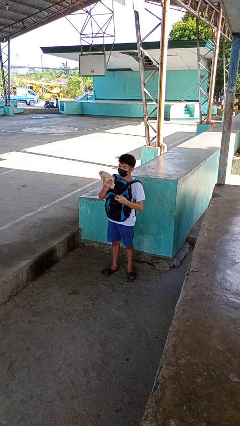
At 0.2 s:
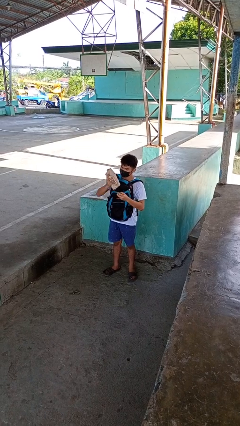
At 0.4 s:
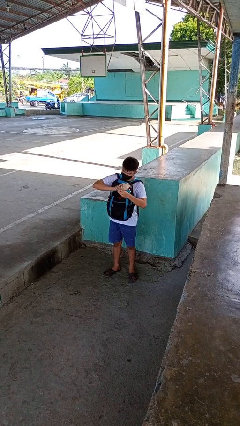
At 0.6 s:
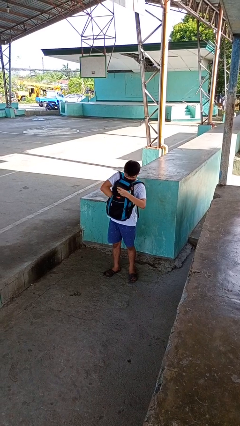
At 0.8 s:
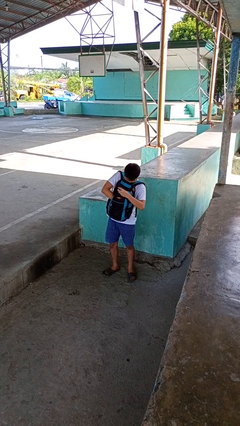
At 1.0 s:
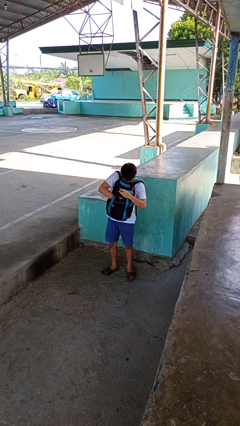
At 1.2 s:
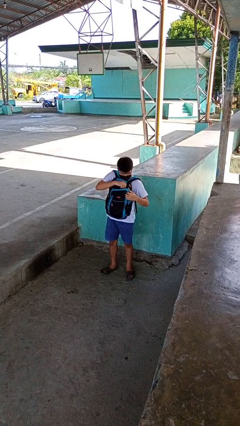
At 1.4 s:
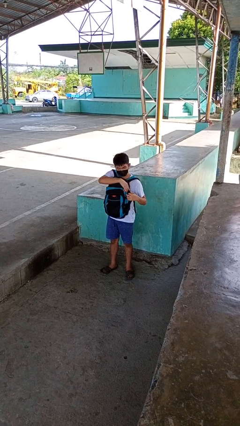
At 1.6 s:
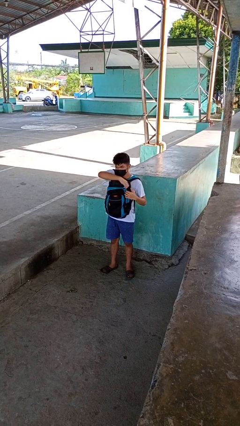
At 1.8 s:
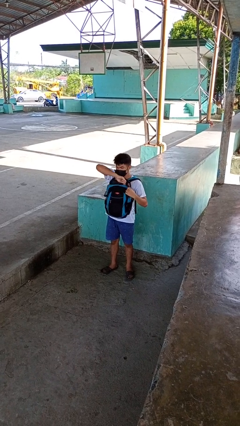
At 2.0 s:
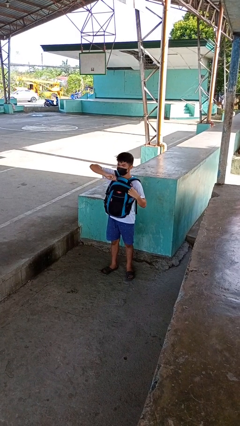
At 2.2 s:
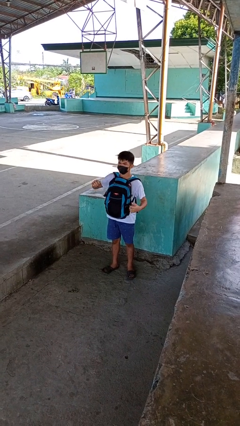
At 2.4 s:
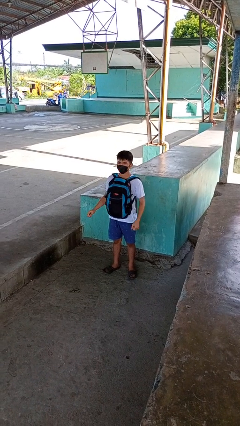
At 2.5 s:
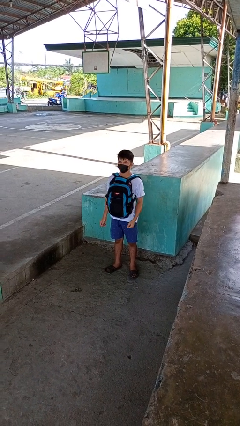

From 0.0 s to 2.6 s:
person puts object into backpack

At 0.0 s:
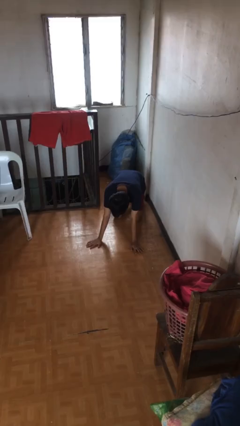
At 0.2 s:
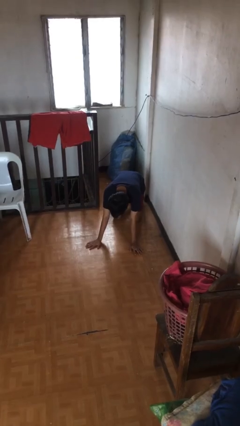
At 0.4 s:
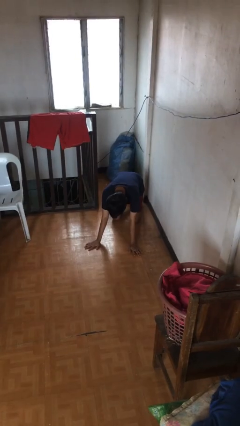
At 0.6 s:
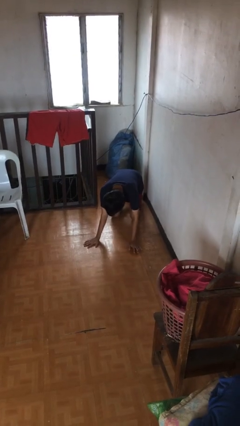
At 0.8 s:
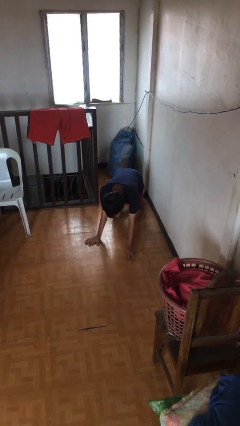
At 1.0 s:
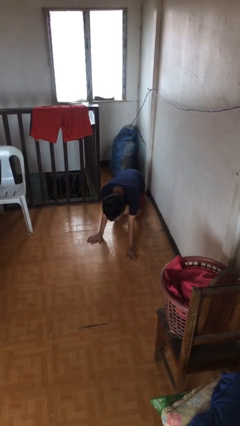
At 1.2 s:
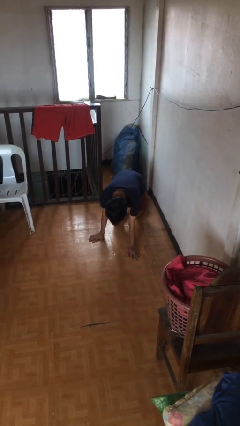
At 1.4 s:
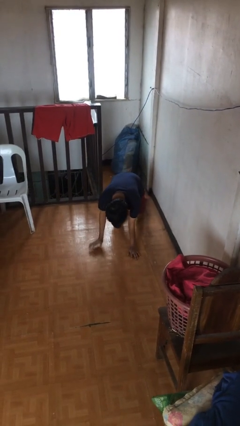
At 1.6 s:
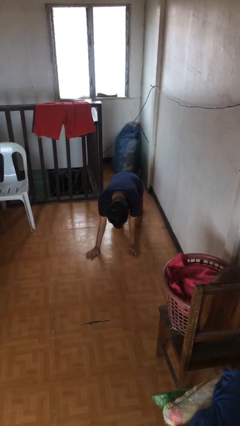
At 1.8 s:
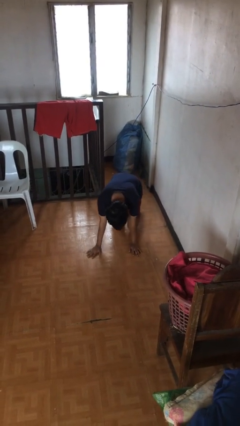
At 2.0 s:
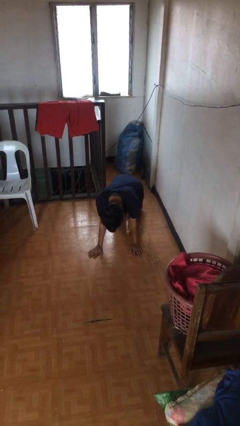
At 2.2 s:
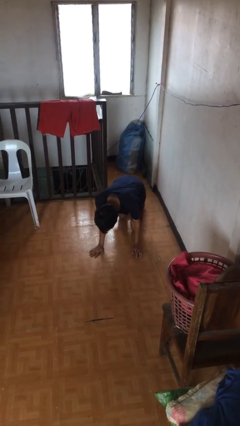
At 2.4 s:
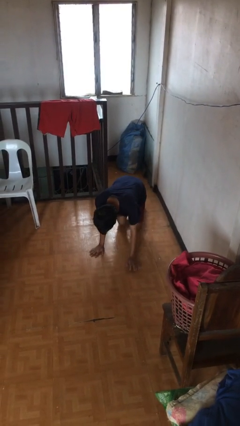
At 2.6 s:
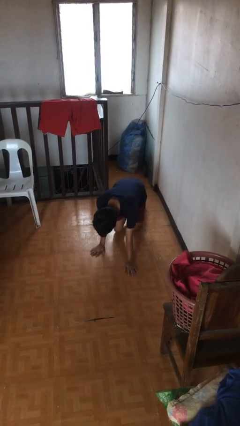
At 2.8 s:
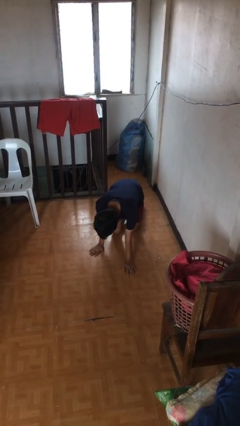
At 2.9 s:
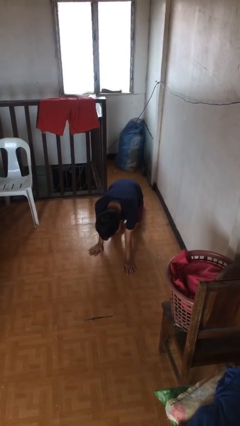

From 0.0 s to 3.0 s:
person crawls

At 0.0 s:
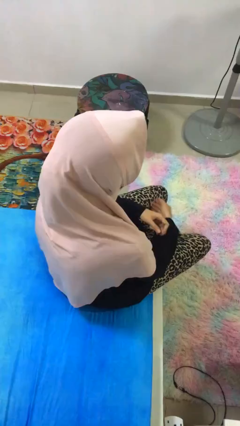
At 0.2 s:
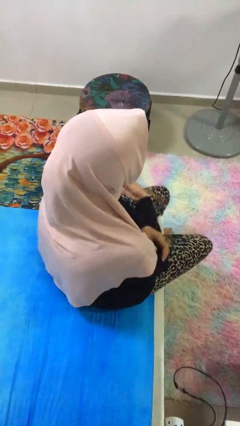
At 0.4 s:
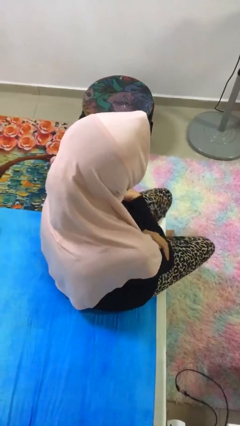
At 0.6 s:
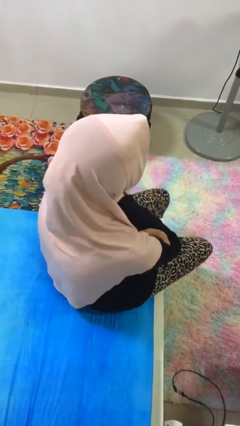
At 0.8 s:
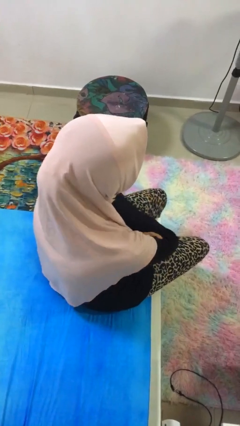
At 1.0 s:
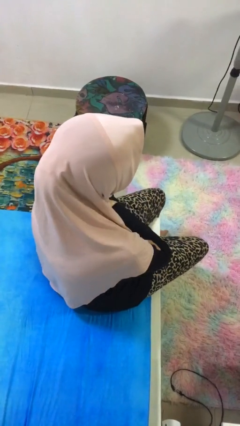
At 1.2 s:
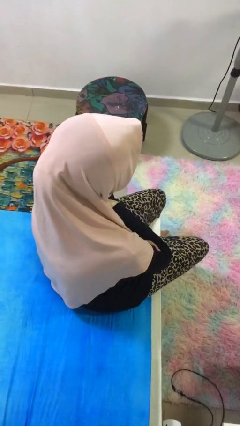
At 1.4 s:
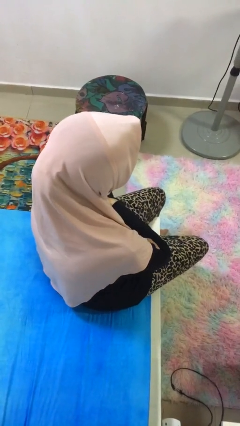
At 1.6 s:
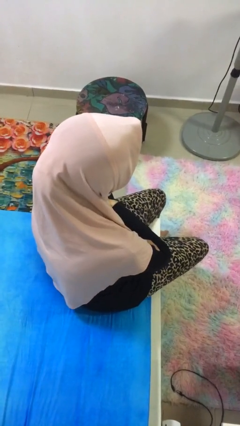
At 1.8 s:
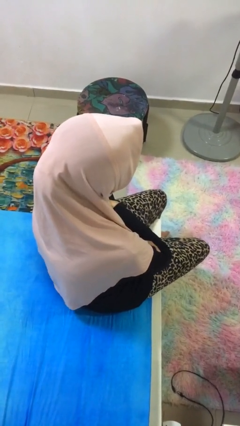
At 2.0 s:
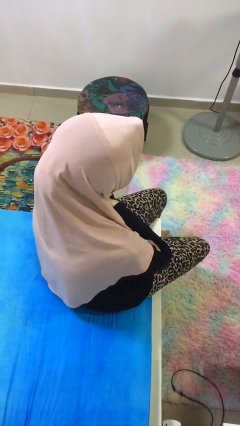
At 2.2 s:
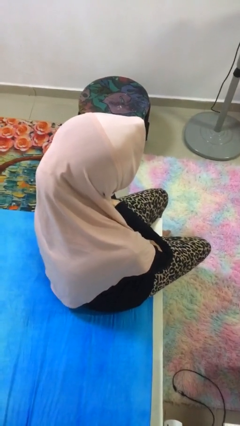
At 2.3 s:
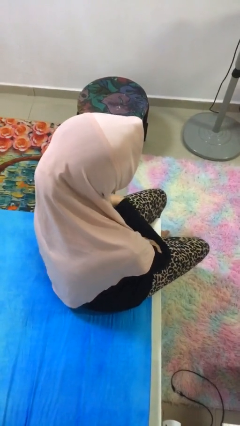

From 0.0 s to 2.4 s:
person crosses arms

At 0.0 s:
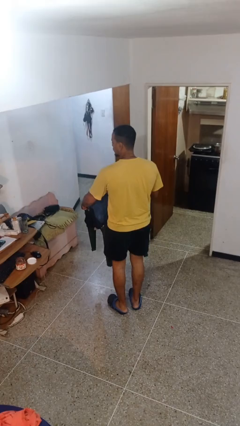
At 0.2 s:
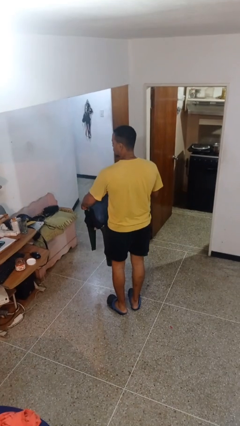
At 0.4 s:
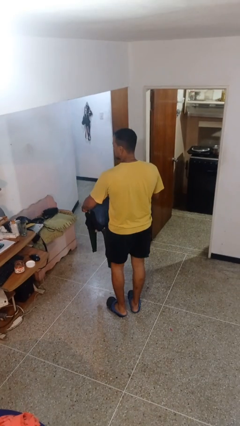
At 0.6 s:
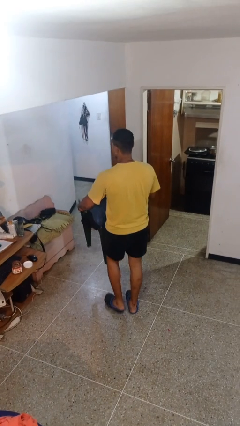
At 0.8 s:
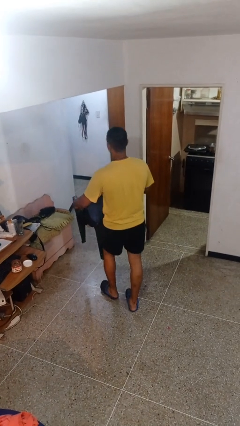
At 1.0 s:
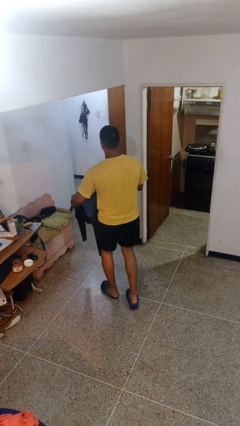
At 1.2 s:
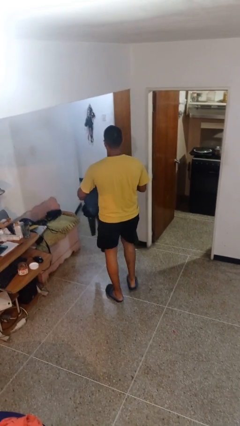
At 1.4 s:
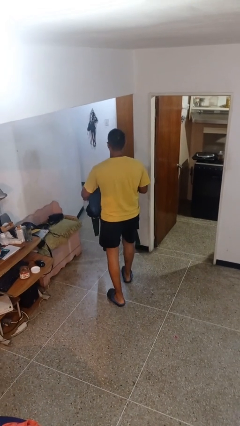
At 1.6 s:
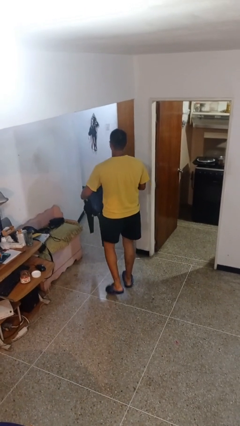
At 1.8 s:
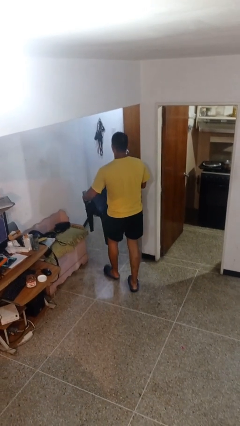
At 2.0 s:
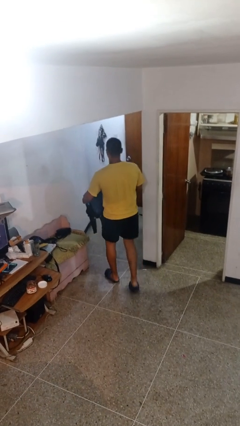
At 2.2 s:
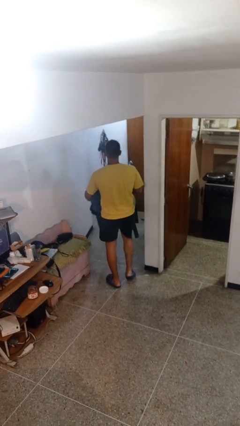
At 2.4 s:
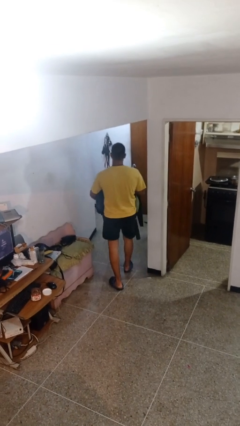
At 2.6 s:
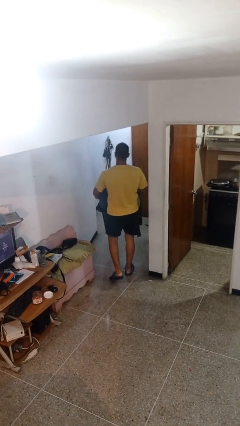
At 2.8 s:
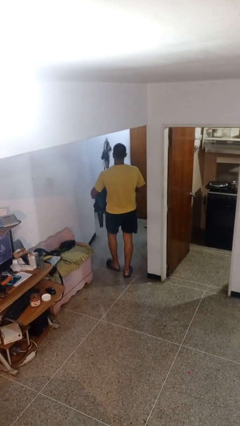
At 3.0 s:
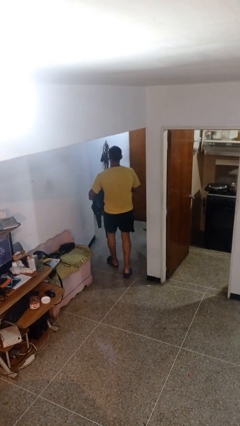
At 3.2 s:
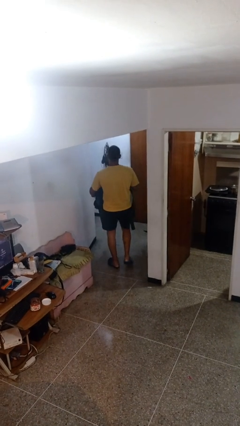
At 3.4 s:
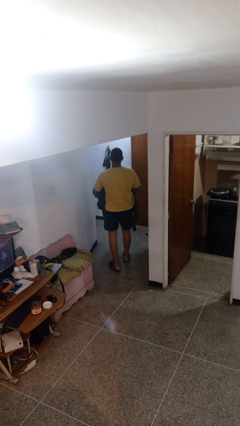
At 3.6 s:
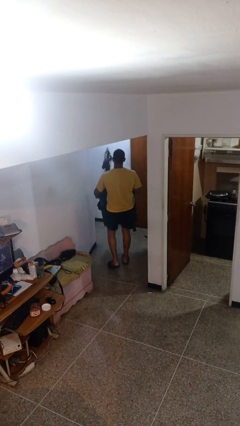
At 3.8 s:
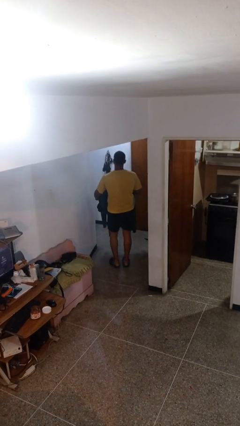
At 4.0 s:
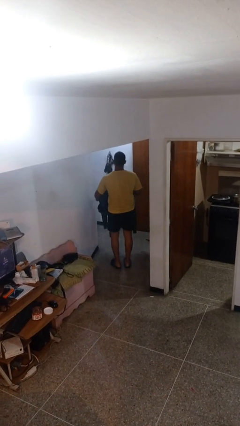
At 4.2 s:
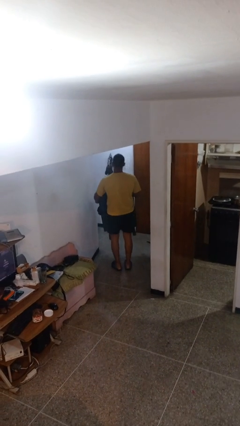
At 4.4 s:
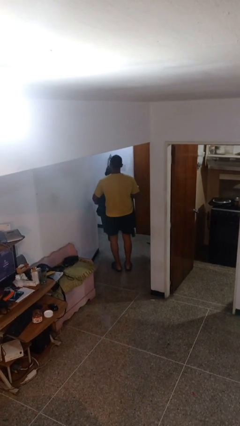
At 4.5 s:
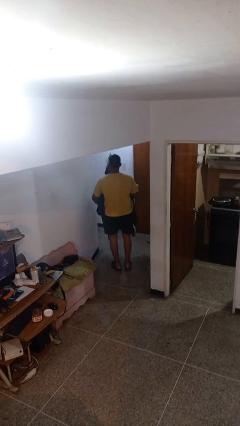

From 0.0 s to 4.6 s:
person carries furniture

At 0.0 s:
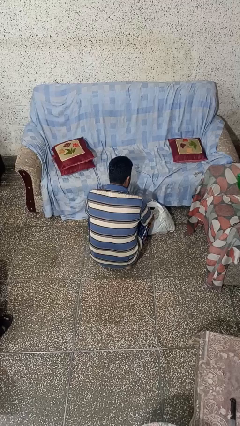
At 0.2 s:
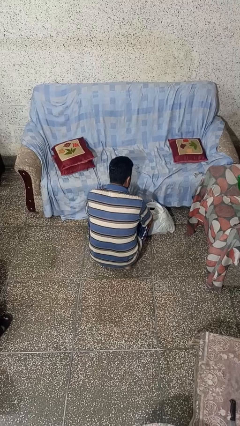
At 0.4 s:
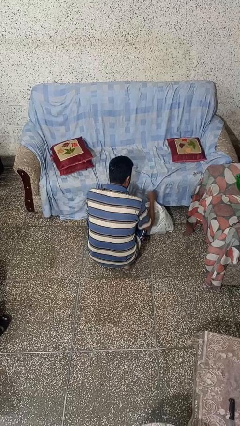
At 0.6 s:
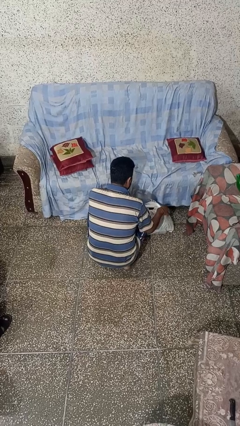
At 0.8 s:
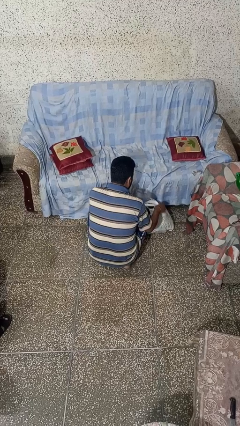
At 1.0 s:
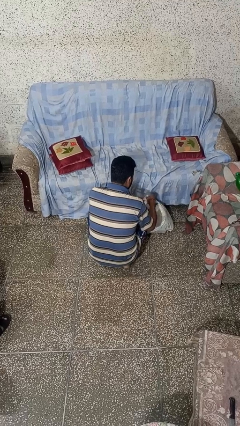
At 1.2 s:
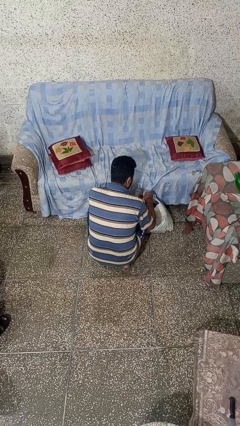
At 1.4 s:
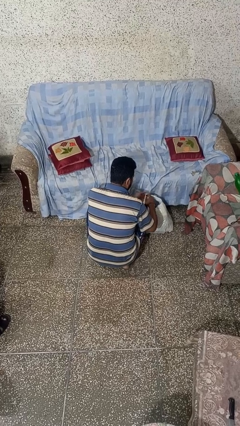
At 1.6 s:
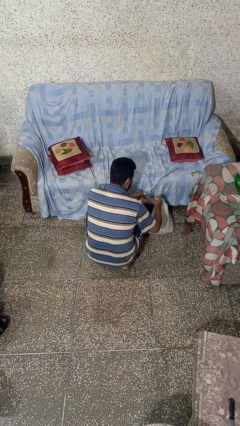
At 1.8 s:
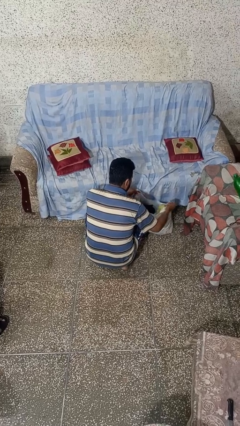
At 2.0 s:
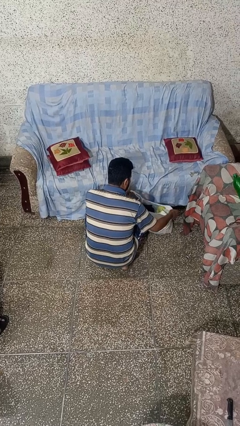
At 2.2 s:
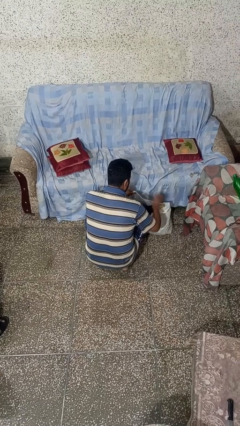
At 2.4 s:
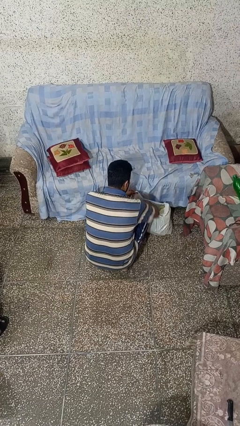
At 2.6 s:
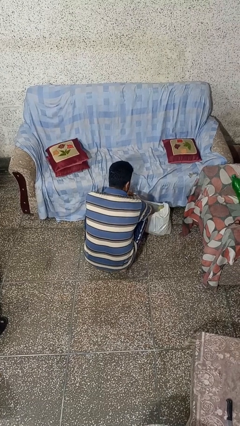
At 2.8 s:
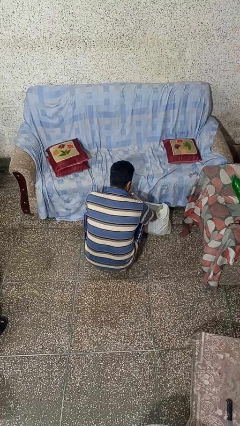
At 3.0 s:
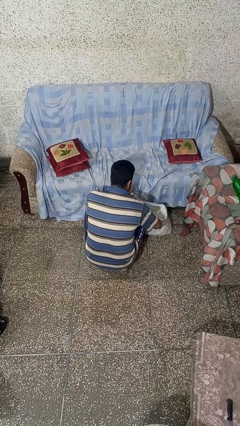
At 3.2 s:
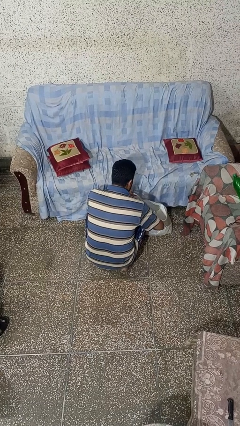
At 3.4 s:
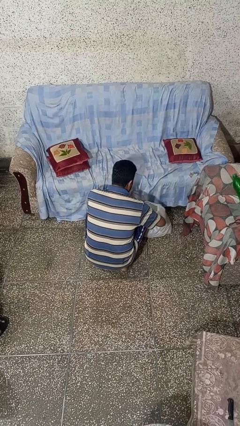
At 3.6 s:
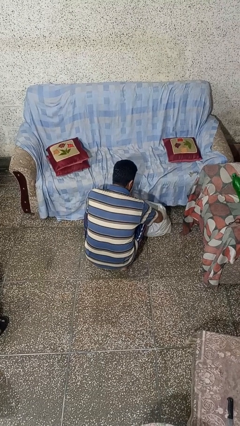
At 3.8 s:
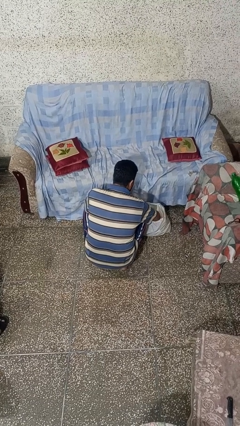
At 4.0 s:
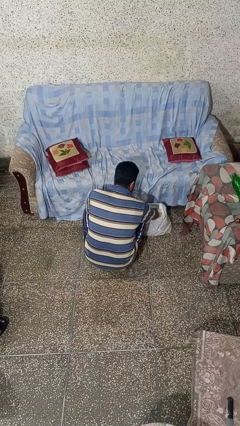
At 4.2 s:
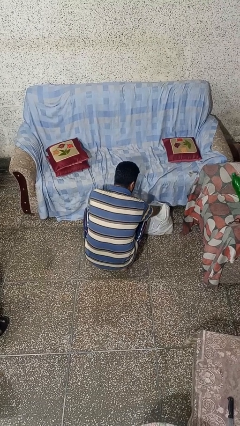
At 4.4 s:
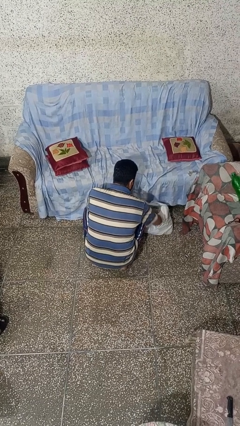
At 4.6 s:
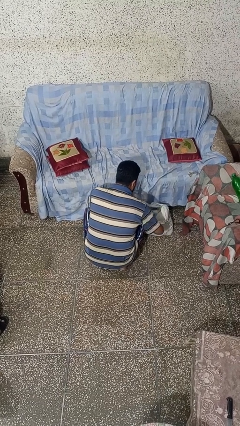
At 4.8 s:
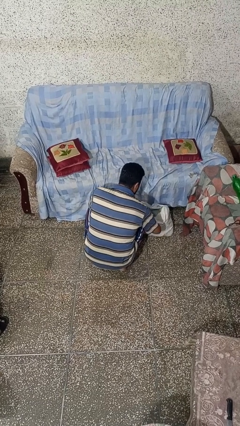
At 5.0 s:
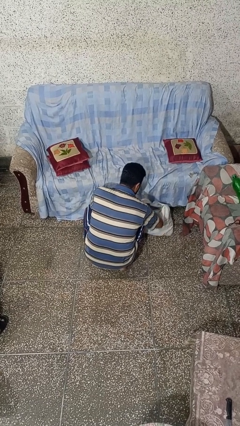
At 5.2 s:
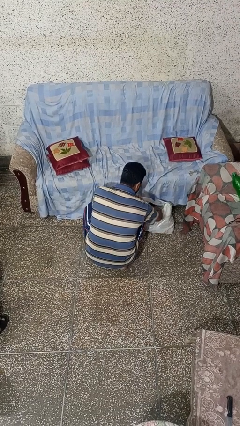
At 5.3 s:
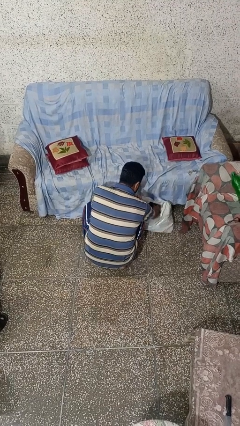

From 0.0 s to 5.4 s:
person searches in bag
